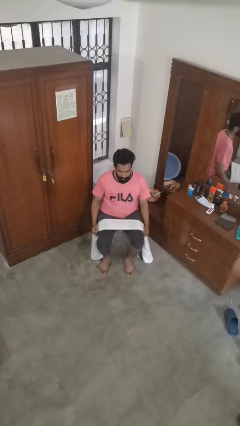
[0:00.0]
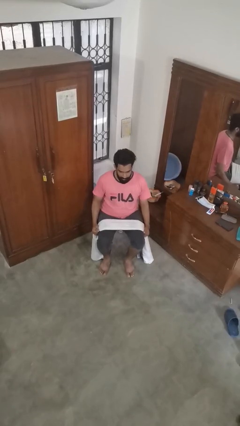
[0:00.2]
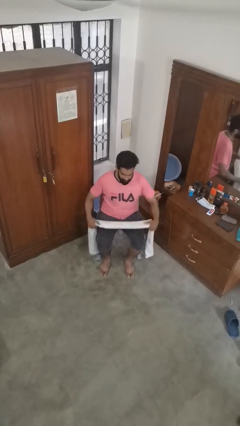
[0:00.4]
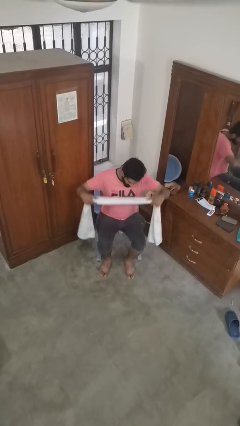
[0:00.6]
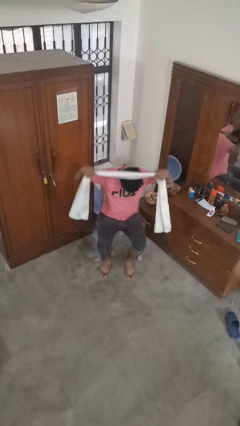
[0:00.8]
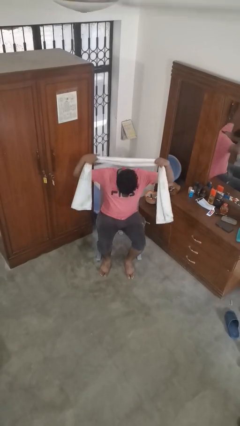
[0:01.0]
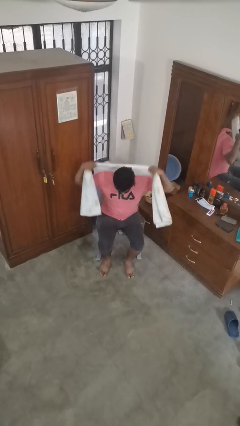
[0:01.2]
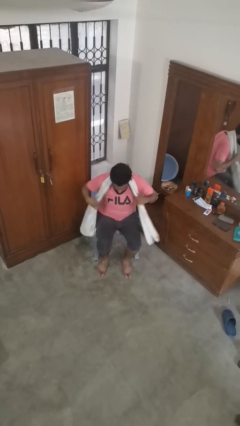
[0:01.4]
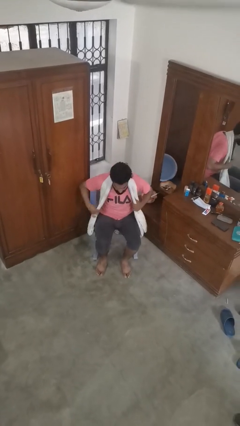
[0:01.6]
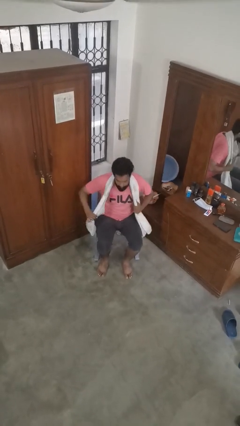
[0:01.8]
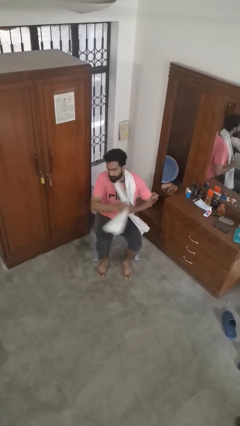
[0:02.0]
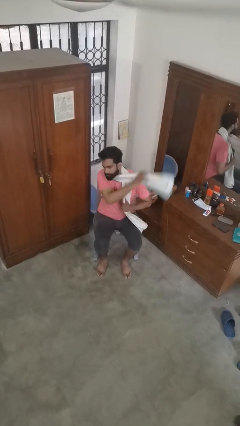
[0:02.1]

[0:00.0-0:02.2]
person puts on scarf

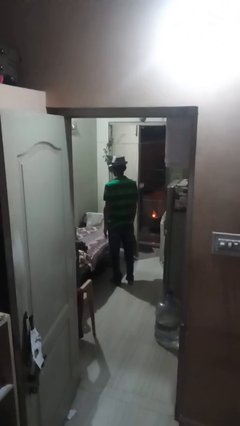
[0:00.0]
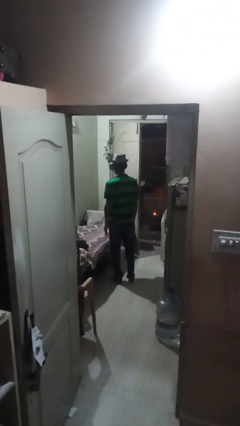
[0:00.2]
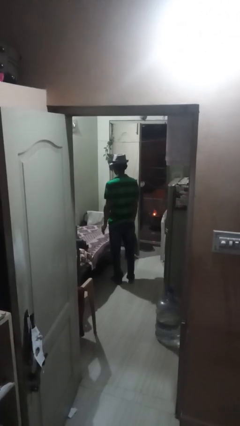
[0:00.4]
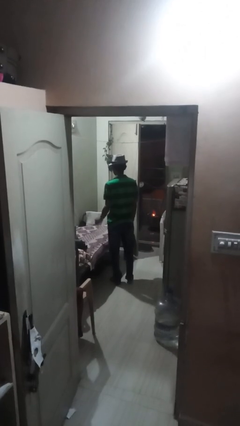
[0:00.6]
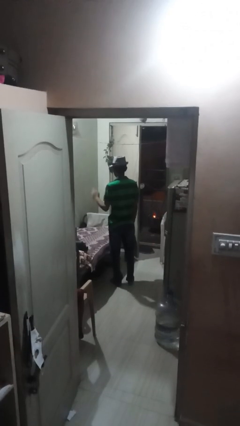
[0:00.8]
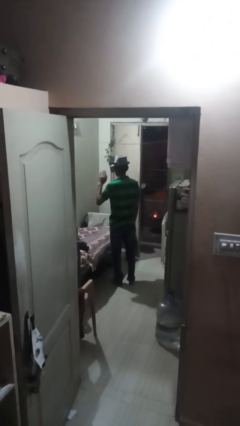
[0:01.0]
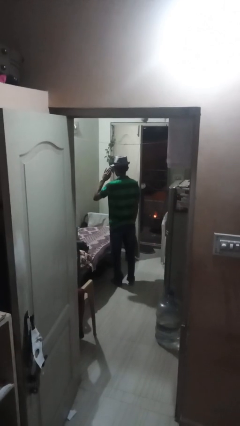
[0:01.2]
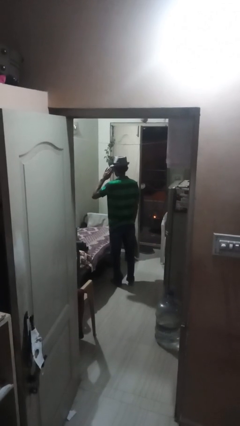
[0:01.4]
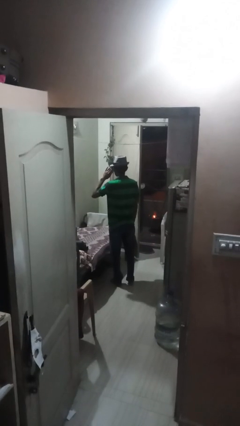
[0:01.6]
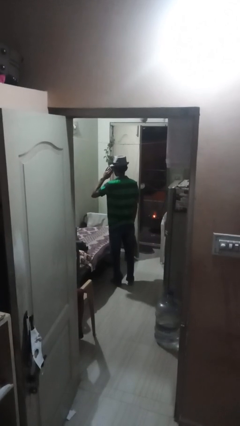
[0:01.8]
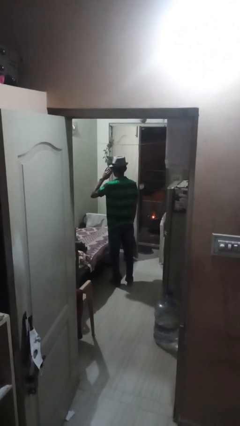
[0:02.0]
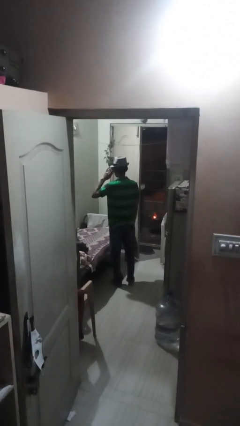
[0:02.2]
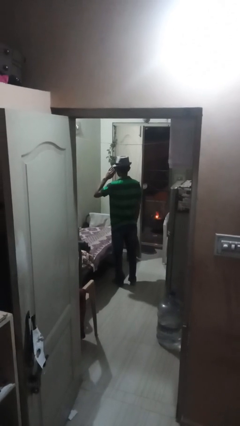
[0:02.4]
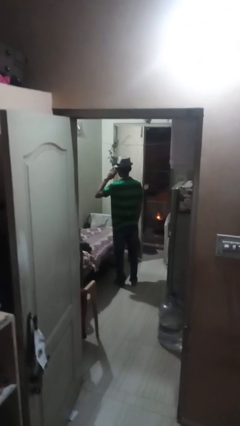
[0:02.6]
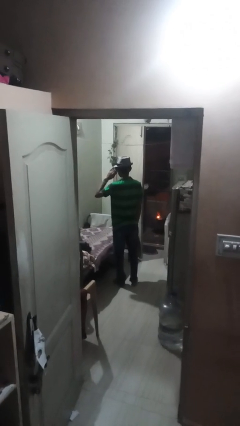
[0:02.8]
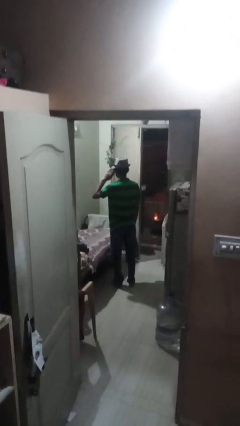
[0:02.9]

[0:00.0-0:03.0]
person salutes

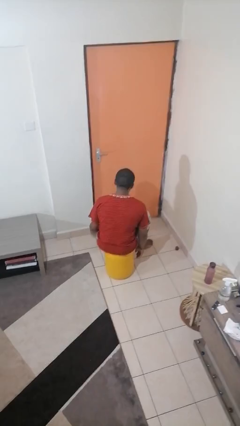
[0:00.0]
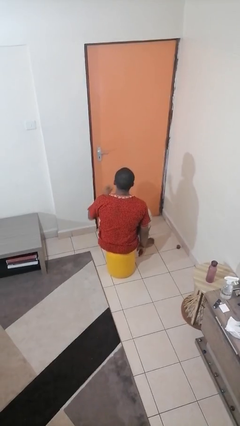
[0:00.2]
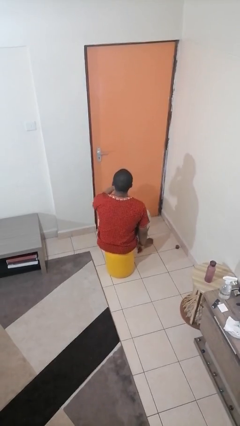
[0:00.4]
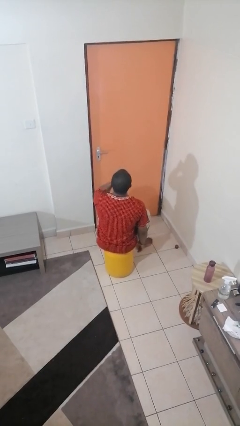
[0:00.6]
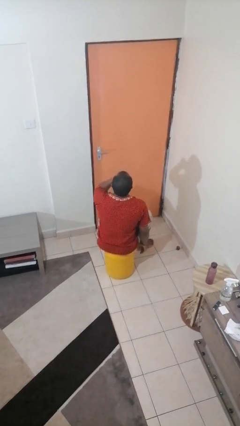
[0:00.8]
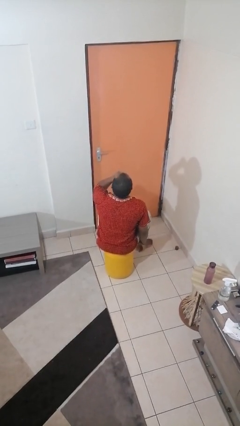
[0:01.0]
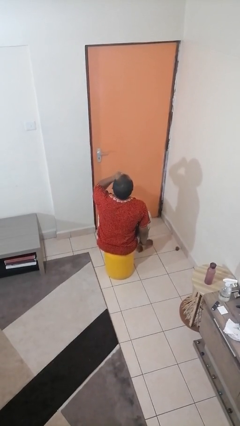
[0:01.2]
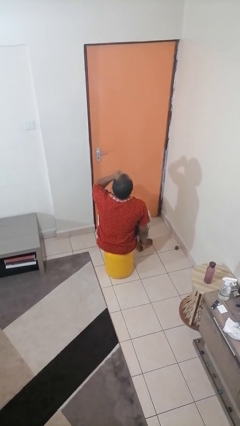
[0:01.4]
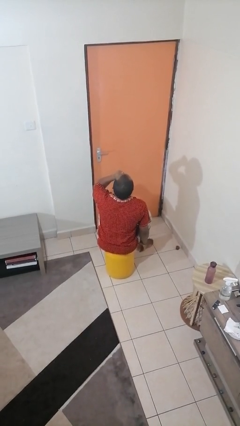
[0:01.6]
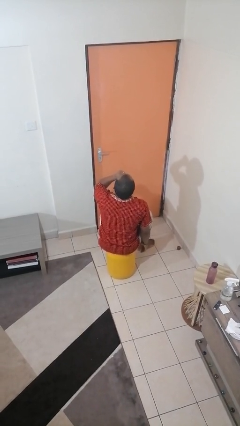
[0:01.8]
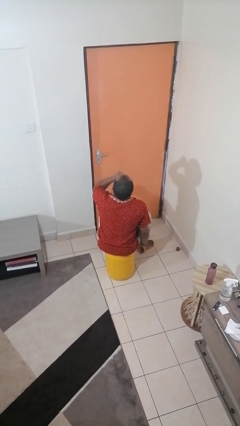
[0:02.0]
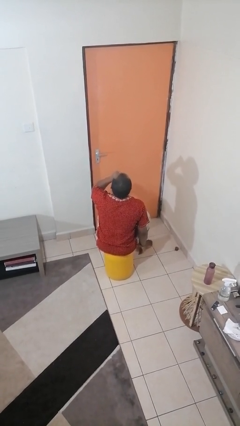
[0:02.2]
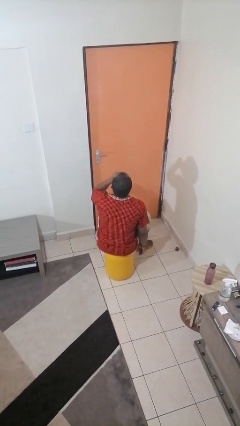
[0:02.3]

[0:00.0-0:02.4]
person yawns

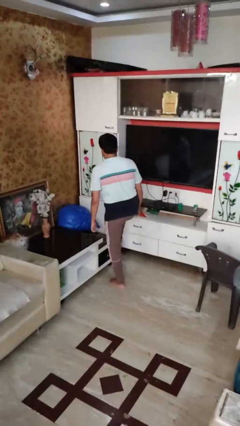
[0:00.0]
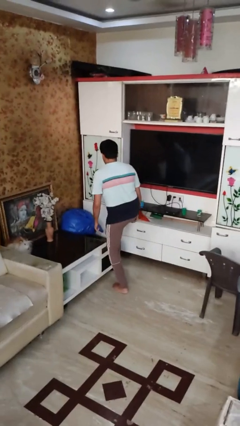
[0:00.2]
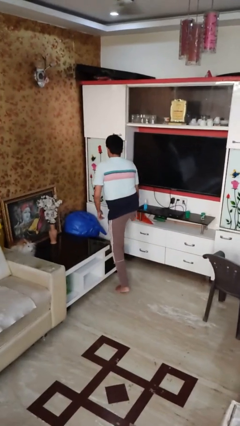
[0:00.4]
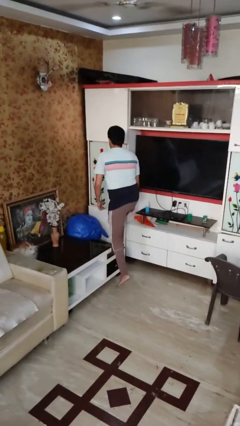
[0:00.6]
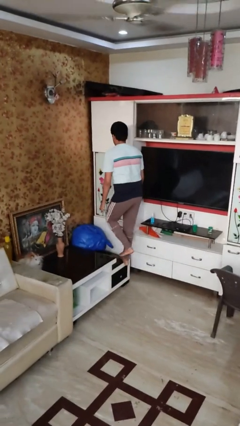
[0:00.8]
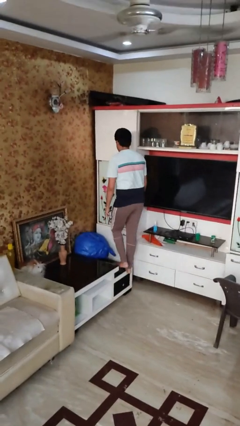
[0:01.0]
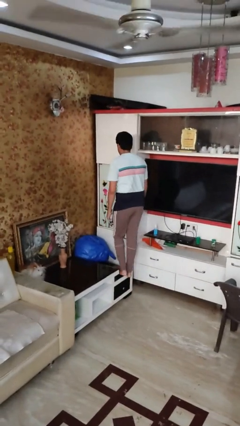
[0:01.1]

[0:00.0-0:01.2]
person climbs on table

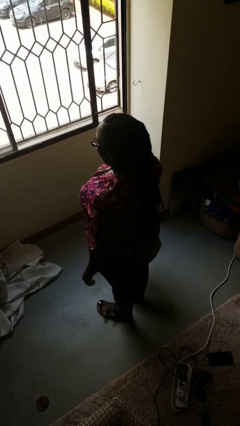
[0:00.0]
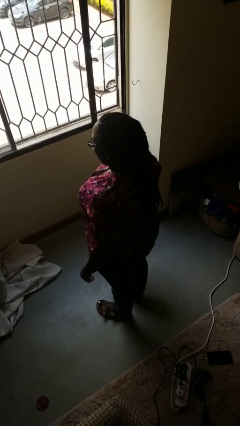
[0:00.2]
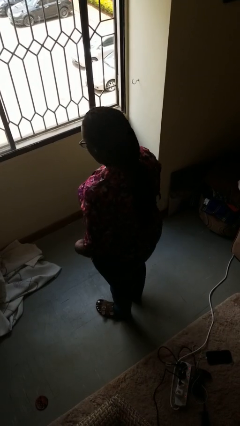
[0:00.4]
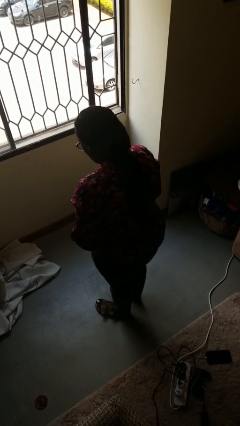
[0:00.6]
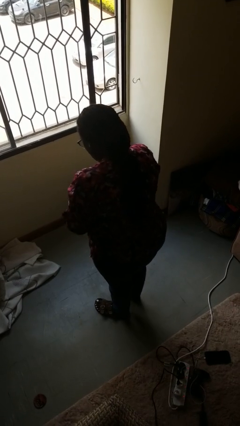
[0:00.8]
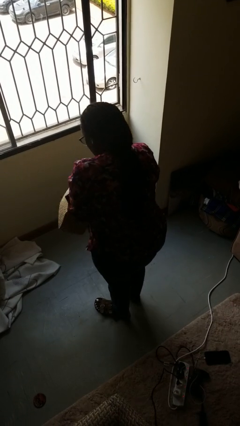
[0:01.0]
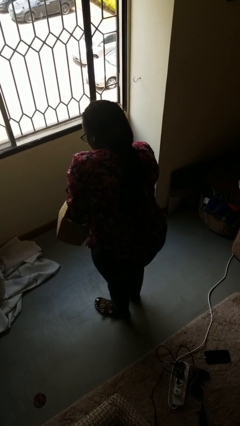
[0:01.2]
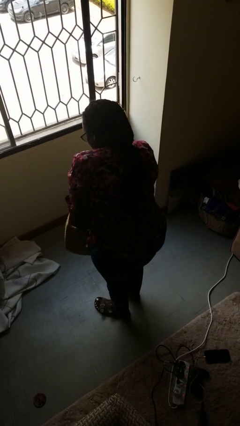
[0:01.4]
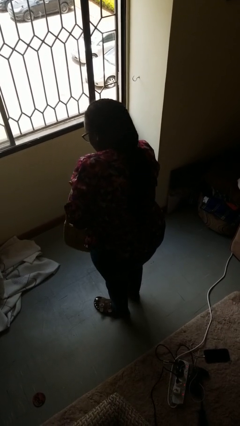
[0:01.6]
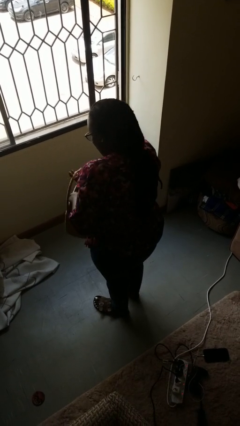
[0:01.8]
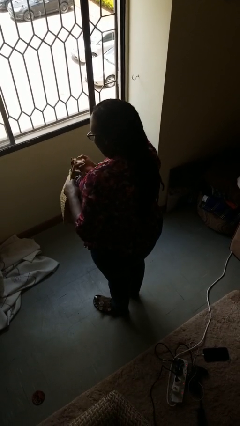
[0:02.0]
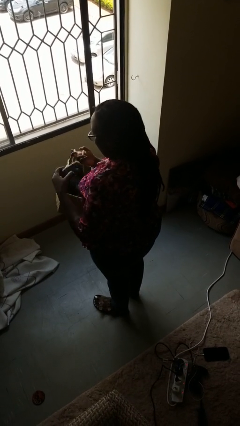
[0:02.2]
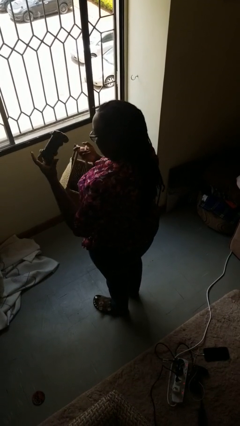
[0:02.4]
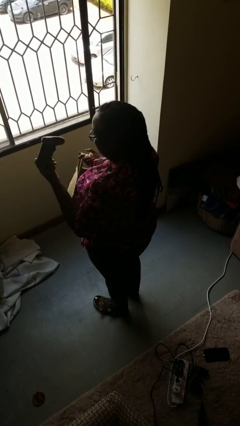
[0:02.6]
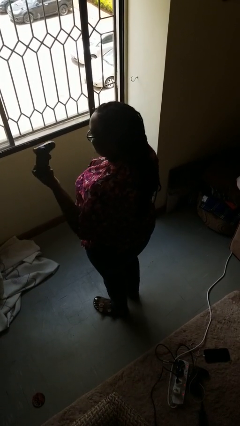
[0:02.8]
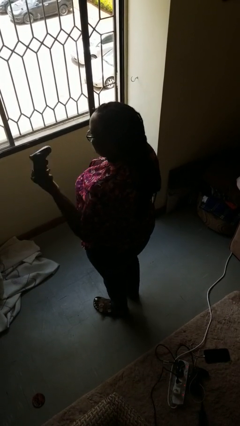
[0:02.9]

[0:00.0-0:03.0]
person takes object from basket

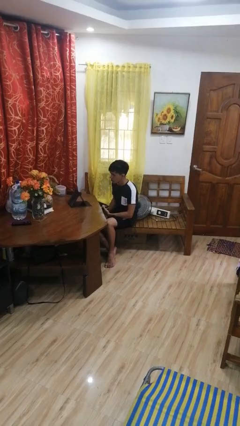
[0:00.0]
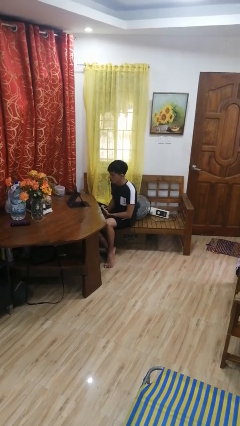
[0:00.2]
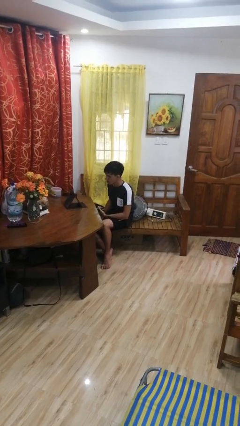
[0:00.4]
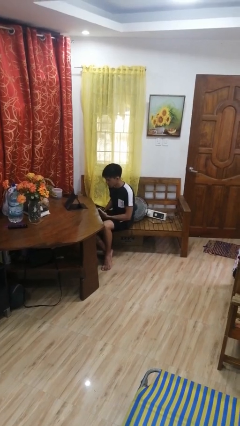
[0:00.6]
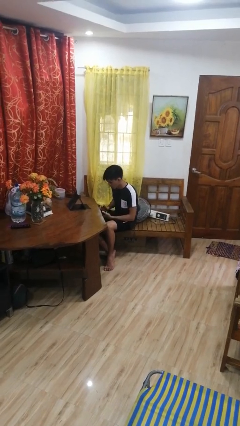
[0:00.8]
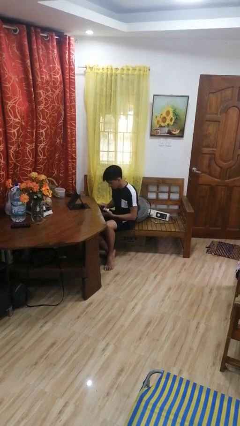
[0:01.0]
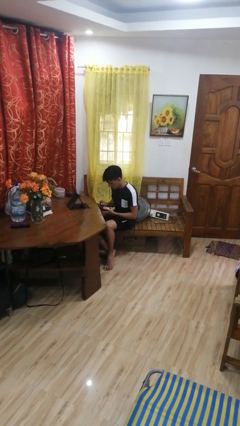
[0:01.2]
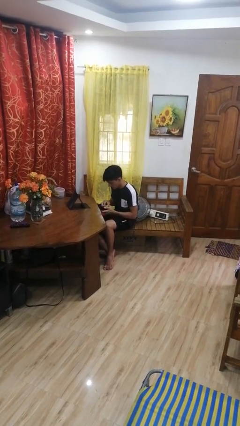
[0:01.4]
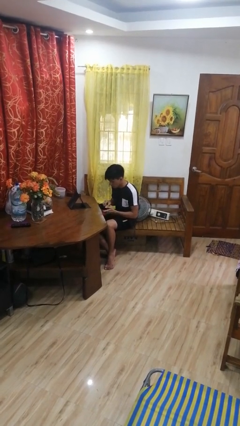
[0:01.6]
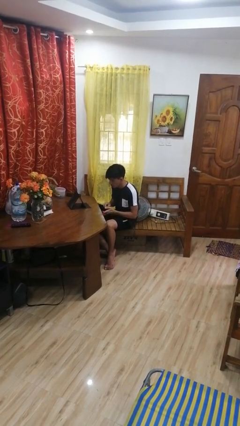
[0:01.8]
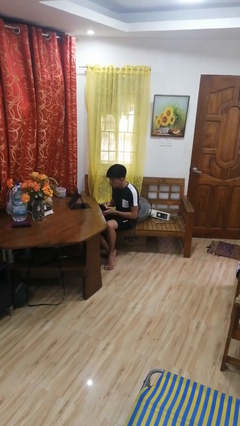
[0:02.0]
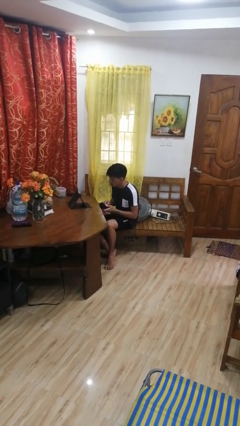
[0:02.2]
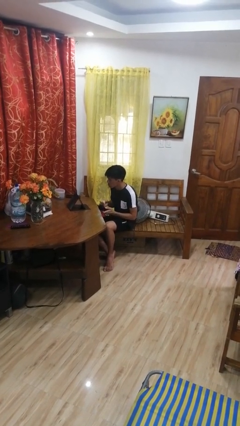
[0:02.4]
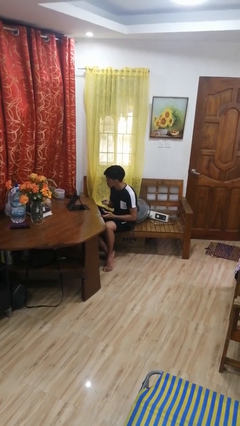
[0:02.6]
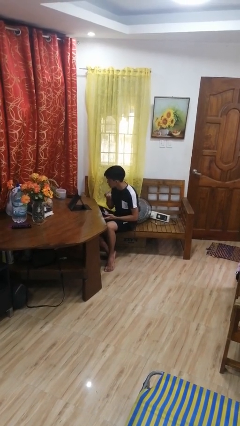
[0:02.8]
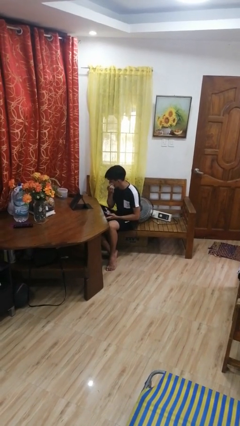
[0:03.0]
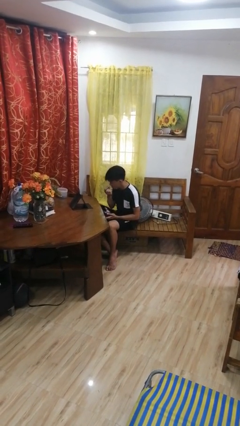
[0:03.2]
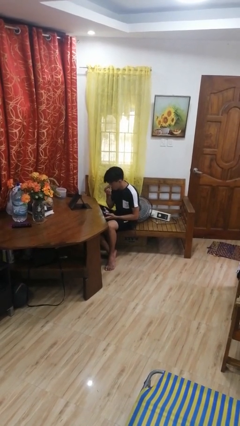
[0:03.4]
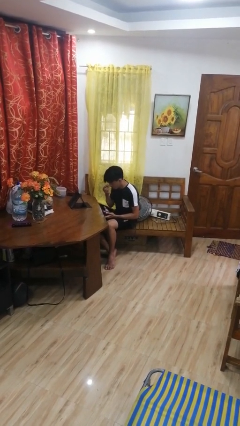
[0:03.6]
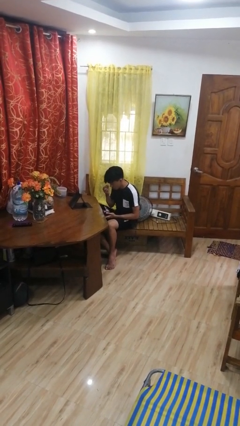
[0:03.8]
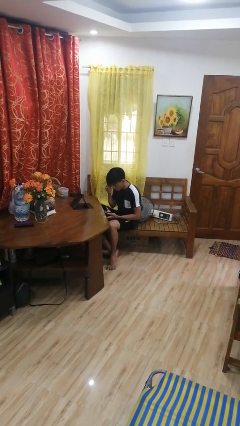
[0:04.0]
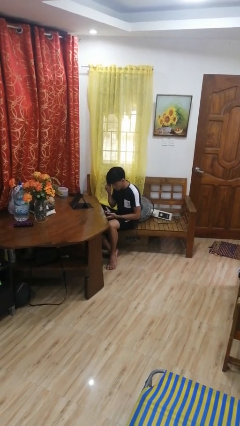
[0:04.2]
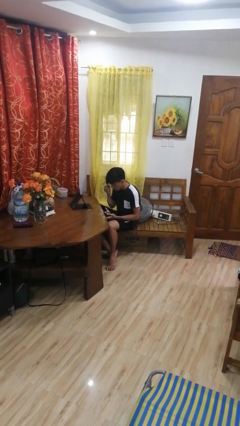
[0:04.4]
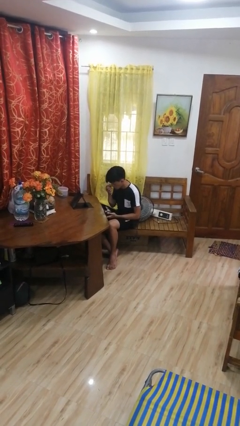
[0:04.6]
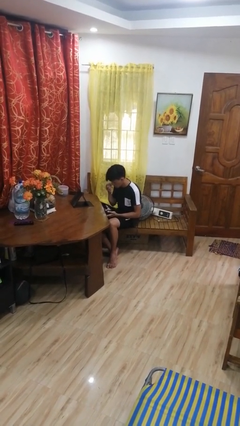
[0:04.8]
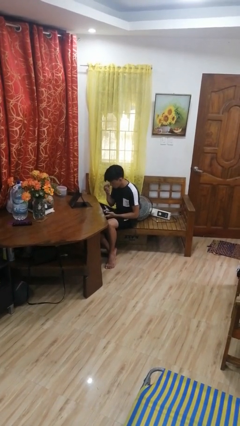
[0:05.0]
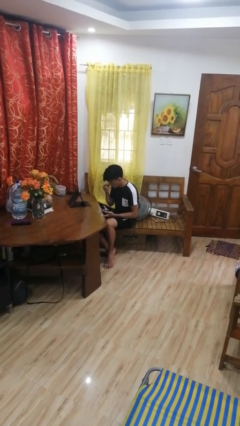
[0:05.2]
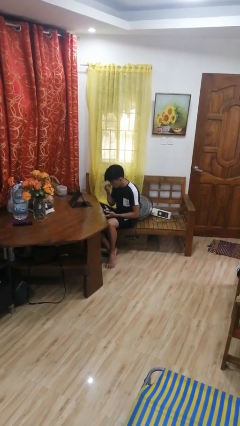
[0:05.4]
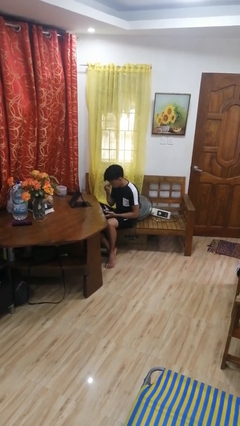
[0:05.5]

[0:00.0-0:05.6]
person applies eye makeup
